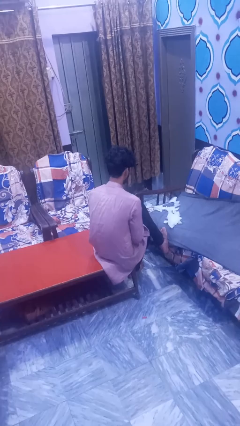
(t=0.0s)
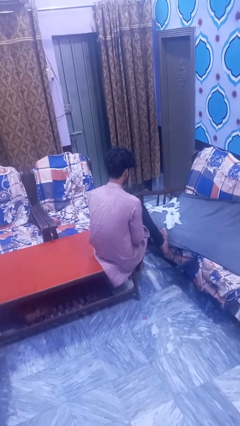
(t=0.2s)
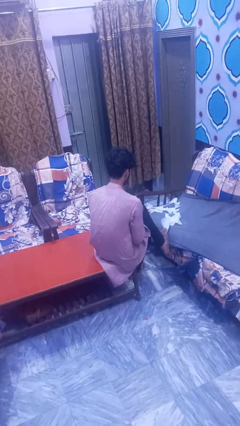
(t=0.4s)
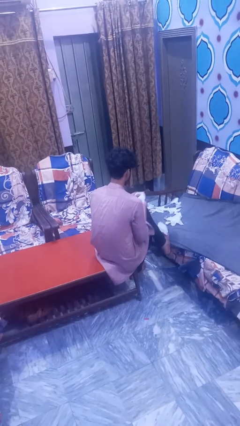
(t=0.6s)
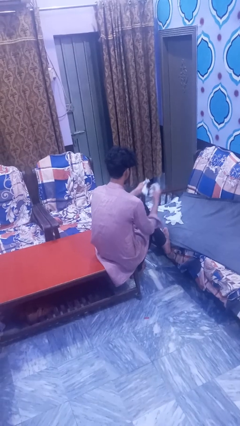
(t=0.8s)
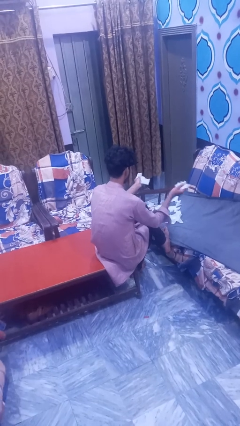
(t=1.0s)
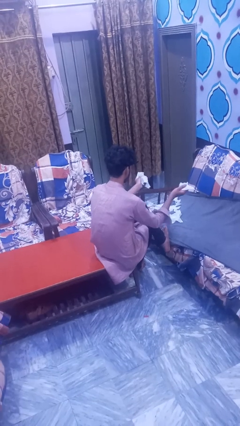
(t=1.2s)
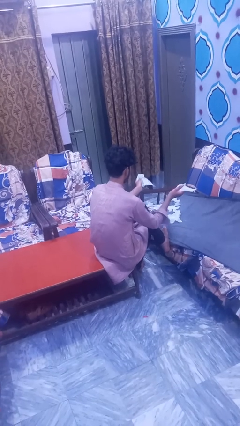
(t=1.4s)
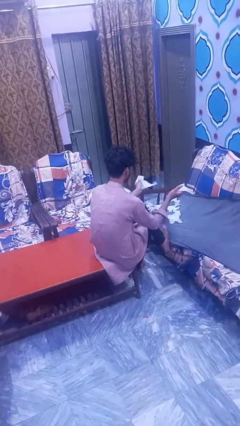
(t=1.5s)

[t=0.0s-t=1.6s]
person tears paper

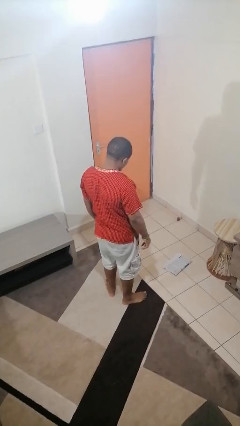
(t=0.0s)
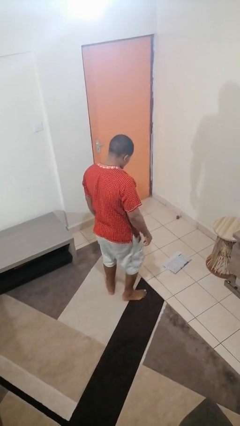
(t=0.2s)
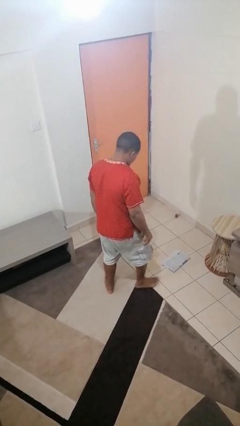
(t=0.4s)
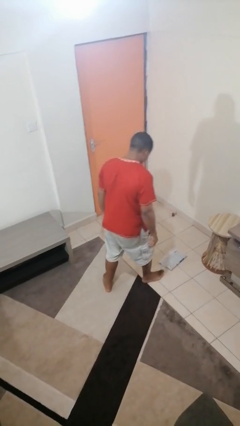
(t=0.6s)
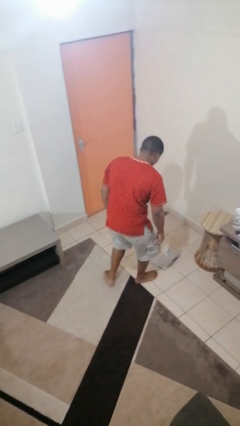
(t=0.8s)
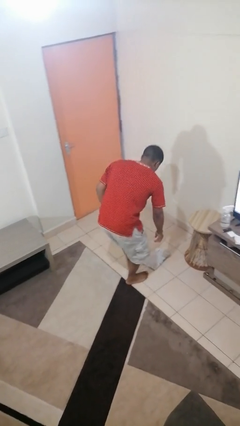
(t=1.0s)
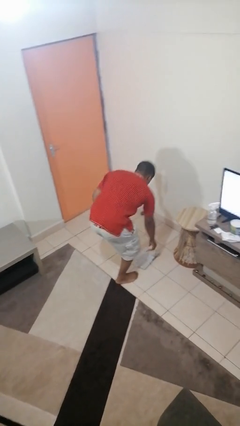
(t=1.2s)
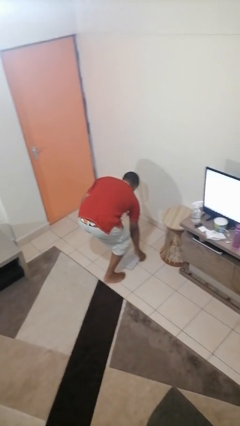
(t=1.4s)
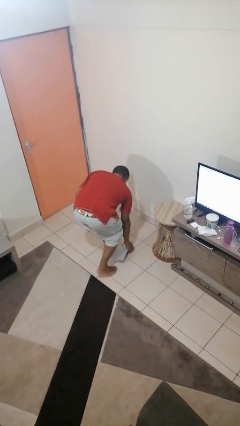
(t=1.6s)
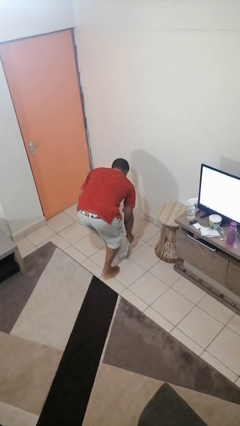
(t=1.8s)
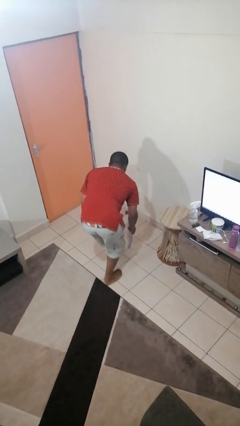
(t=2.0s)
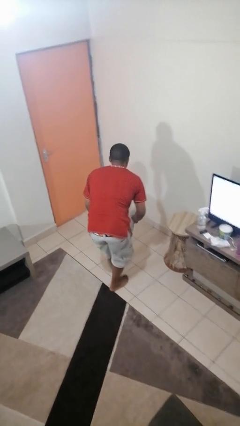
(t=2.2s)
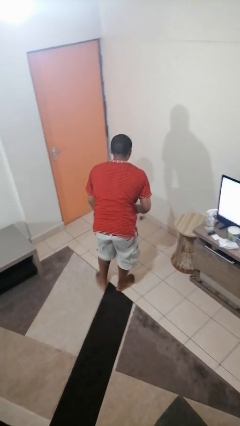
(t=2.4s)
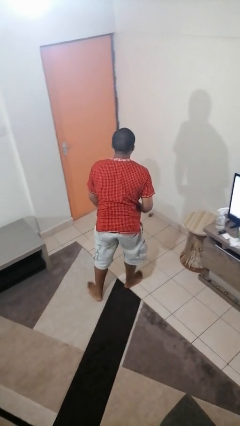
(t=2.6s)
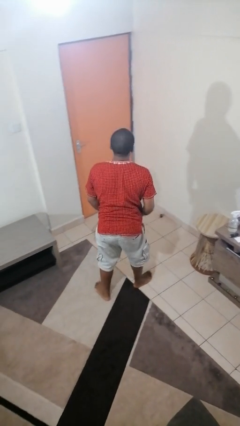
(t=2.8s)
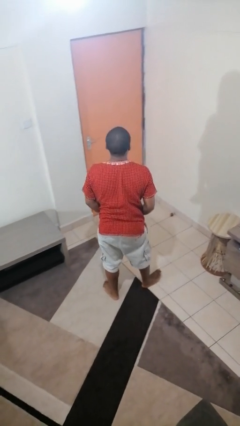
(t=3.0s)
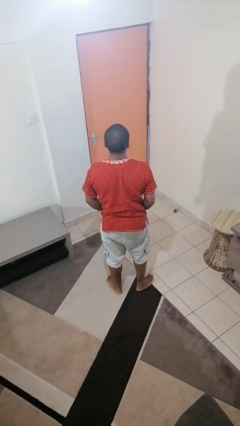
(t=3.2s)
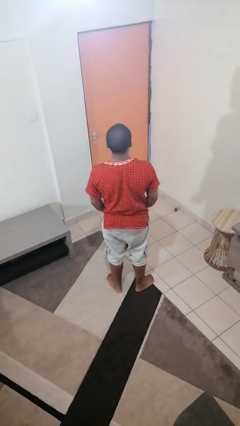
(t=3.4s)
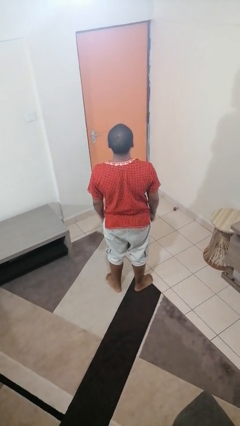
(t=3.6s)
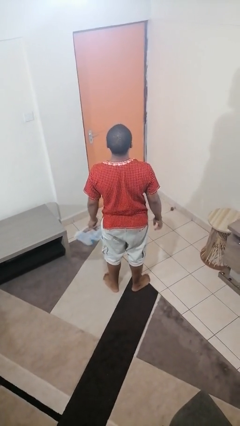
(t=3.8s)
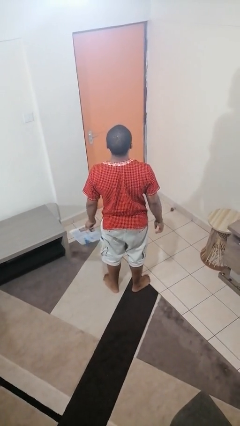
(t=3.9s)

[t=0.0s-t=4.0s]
person picks up object from floor

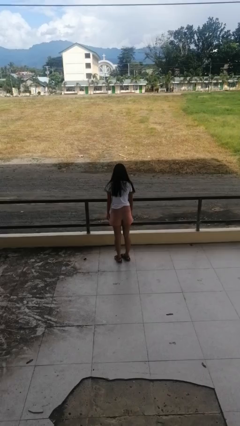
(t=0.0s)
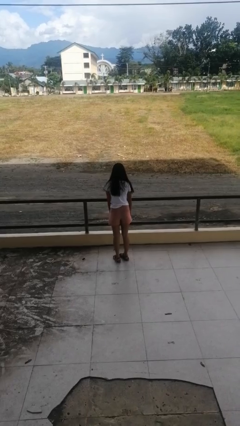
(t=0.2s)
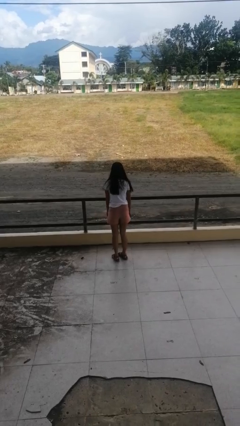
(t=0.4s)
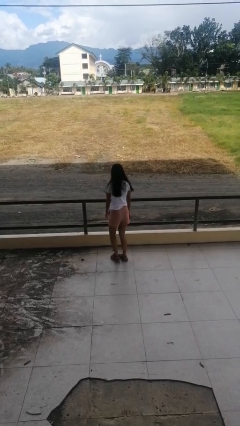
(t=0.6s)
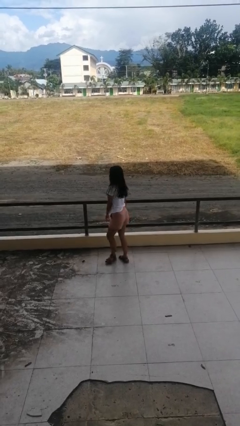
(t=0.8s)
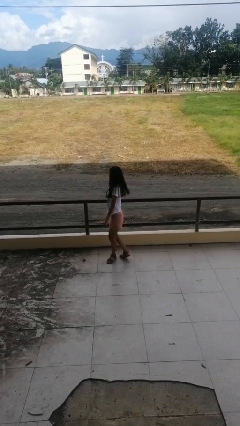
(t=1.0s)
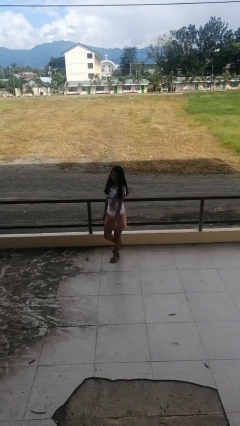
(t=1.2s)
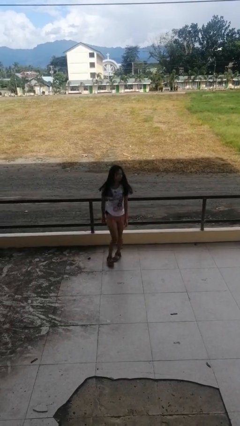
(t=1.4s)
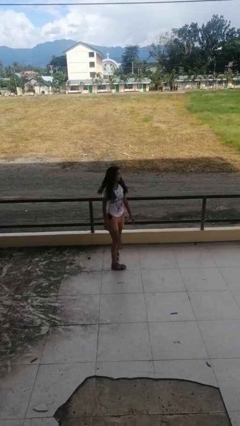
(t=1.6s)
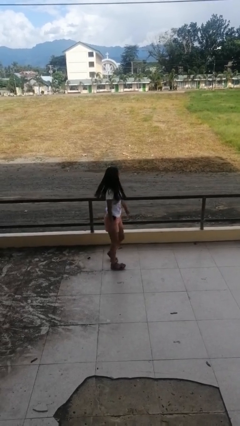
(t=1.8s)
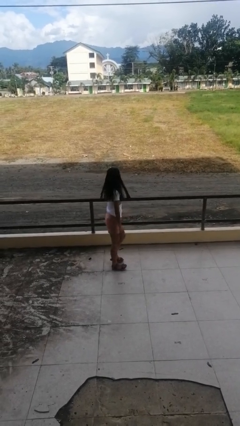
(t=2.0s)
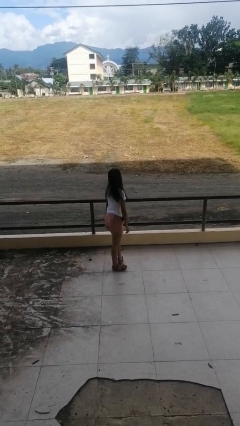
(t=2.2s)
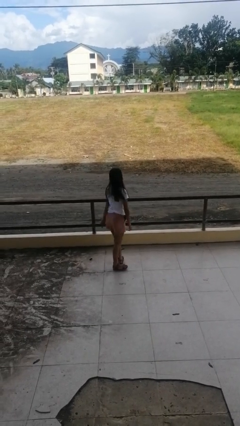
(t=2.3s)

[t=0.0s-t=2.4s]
person twirls

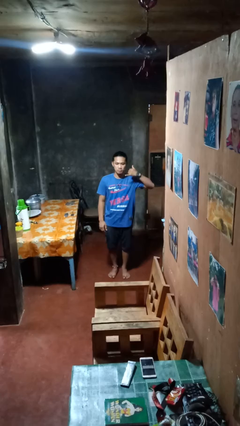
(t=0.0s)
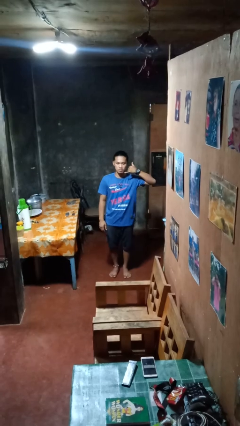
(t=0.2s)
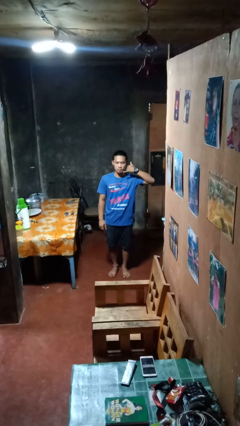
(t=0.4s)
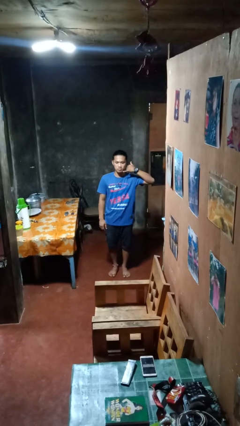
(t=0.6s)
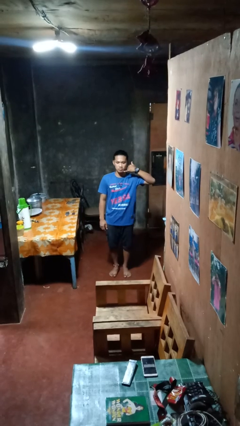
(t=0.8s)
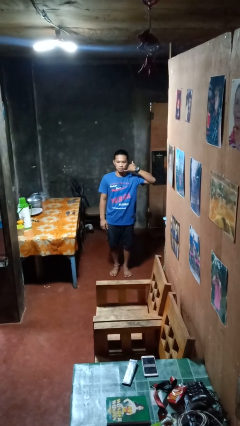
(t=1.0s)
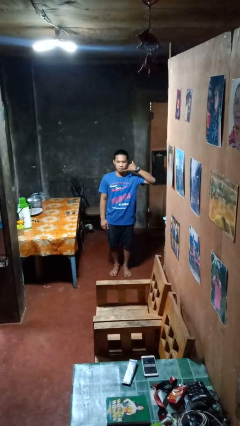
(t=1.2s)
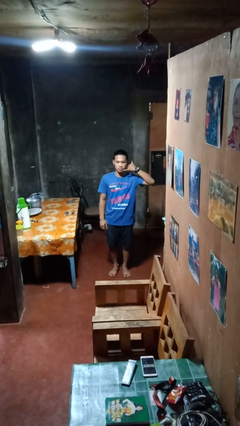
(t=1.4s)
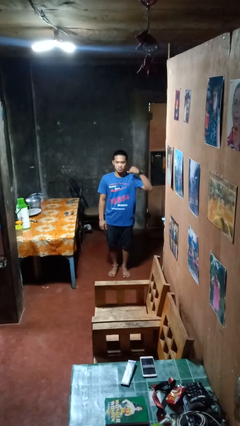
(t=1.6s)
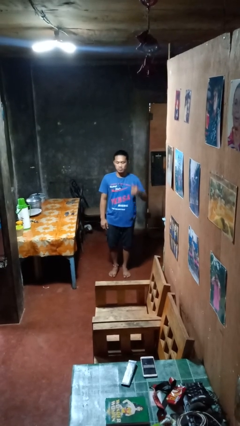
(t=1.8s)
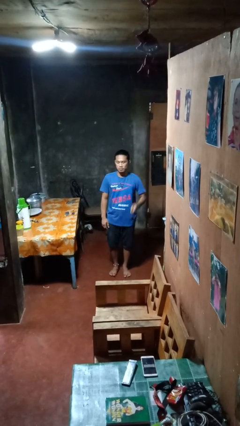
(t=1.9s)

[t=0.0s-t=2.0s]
person gestures call me

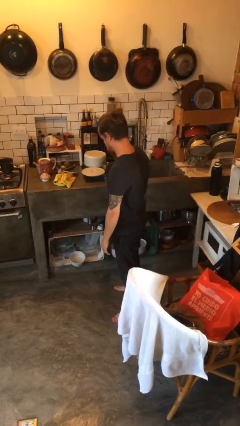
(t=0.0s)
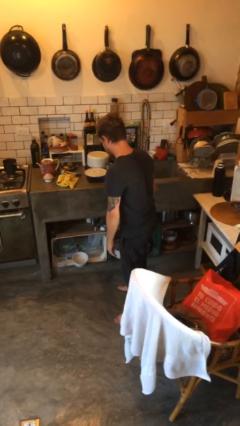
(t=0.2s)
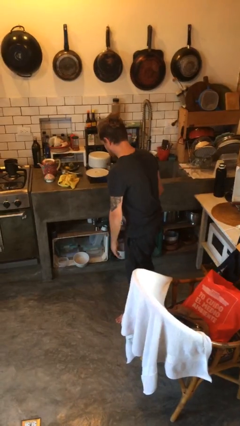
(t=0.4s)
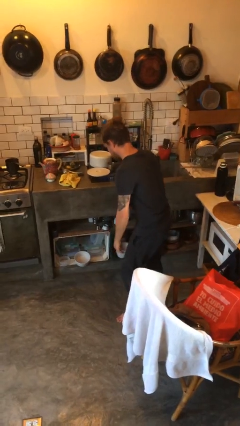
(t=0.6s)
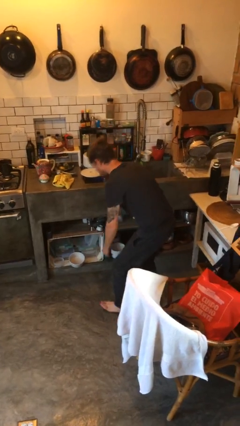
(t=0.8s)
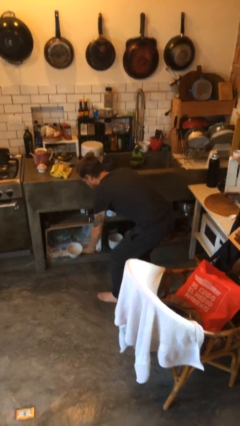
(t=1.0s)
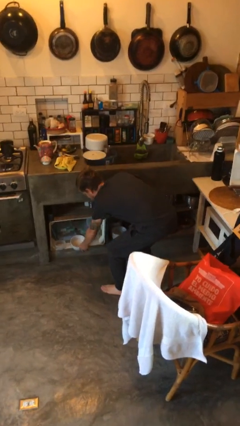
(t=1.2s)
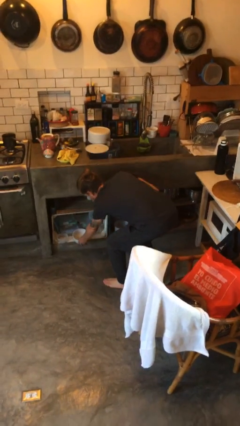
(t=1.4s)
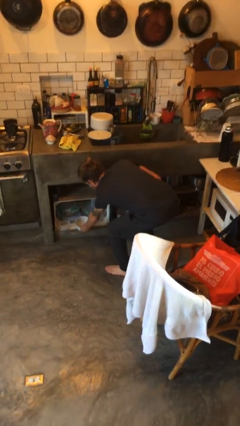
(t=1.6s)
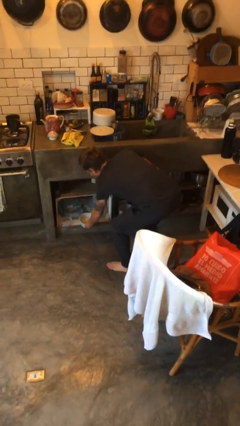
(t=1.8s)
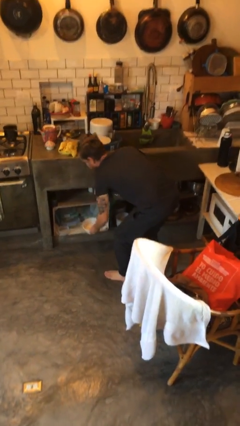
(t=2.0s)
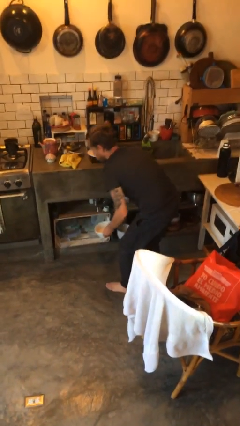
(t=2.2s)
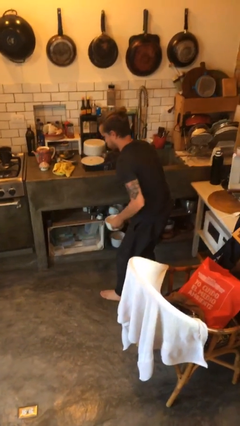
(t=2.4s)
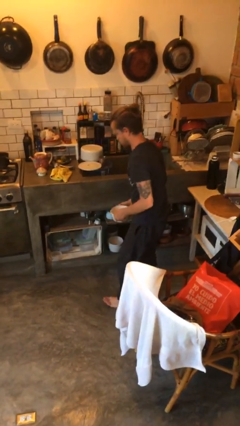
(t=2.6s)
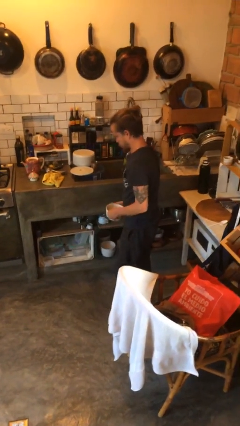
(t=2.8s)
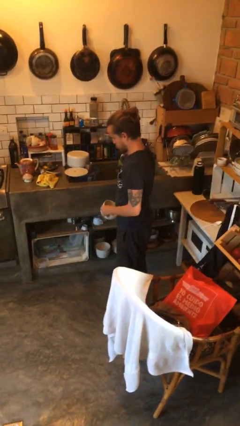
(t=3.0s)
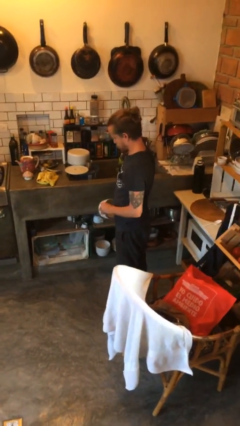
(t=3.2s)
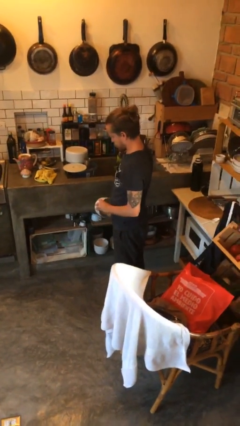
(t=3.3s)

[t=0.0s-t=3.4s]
person picks up object from cabinet

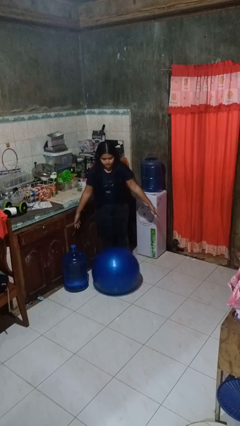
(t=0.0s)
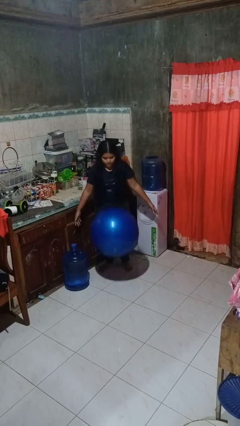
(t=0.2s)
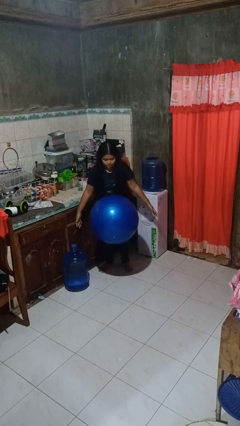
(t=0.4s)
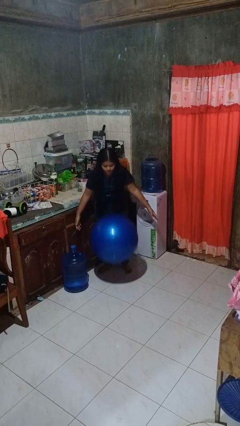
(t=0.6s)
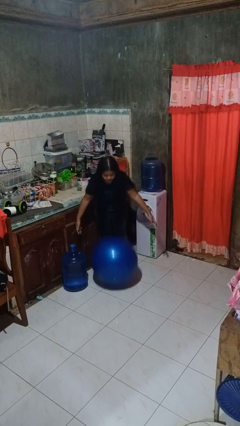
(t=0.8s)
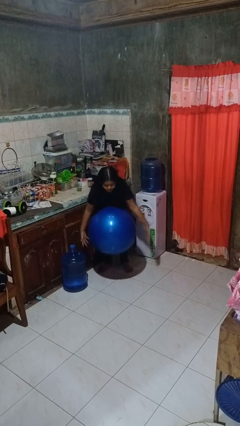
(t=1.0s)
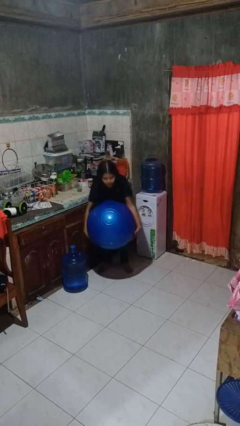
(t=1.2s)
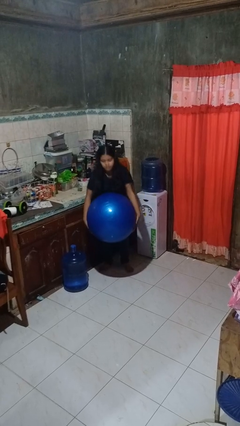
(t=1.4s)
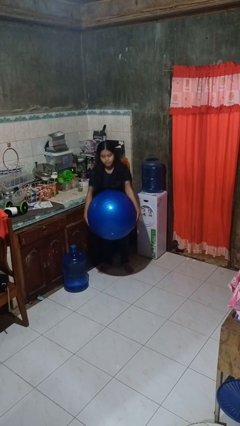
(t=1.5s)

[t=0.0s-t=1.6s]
person bounces ball on floor

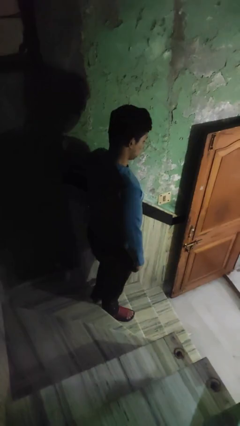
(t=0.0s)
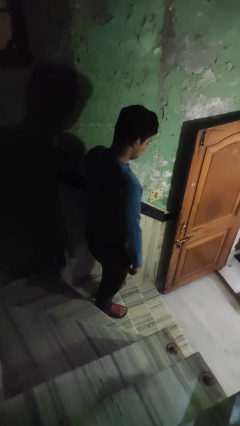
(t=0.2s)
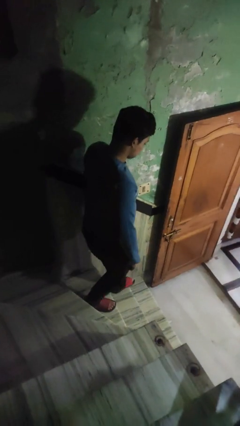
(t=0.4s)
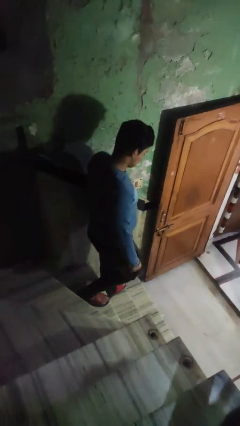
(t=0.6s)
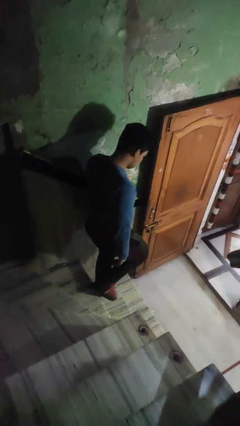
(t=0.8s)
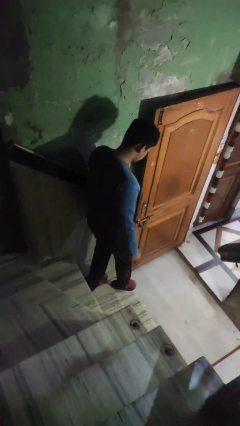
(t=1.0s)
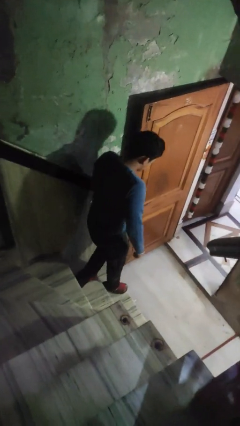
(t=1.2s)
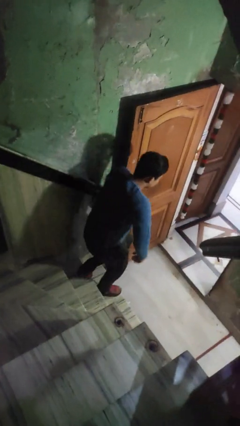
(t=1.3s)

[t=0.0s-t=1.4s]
person climbs down stairs

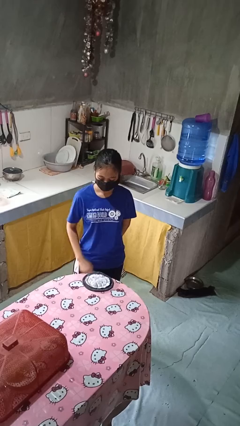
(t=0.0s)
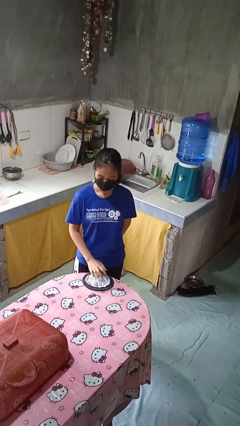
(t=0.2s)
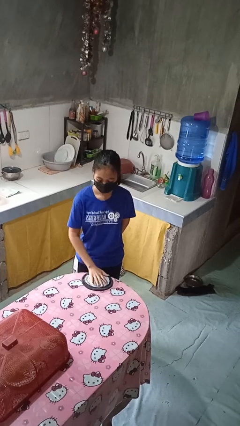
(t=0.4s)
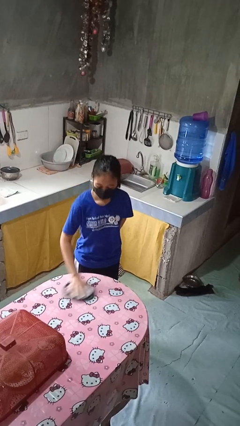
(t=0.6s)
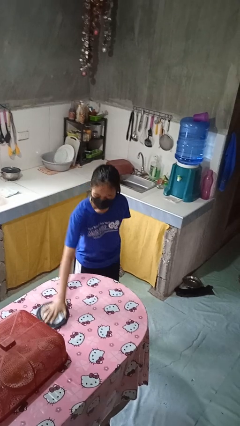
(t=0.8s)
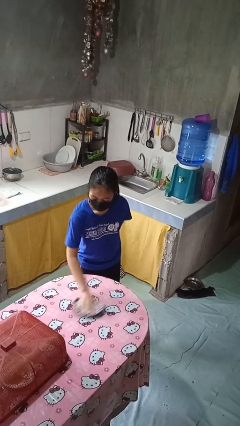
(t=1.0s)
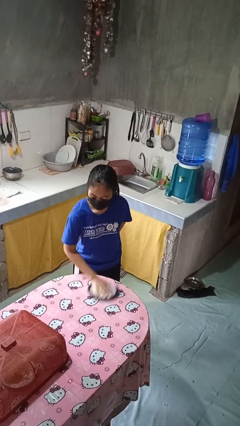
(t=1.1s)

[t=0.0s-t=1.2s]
person cleans table with rag
